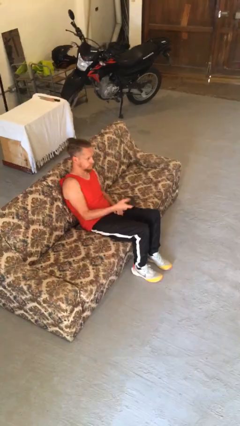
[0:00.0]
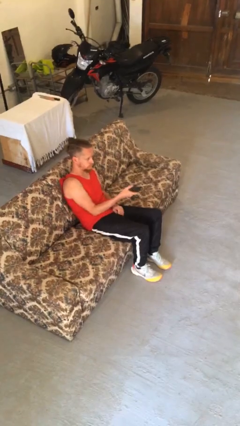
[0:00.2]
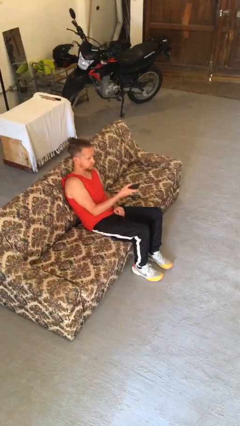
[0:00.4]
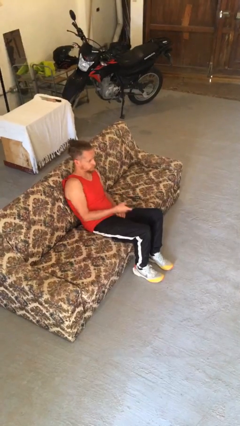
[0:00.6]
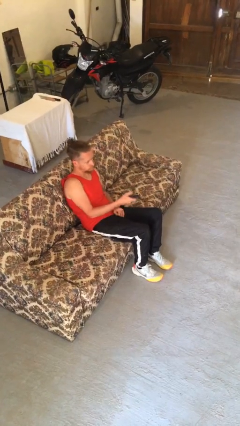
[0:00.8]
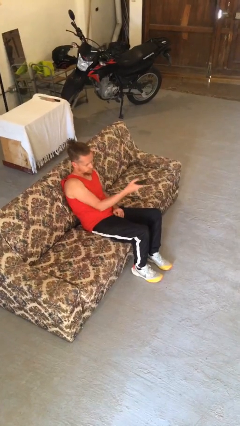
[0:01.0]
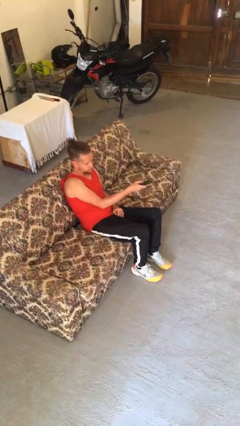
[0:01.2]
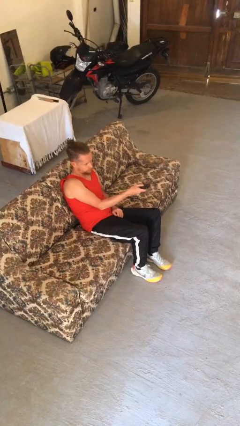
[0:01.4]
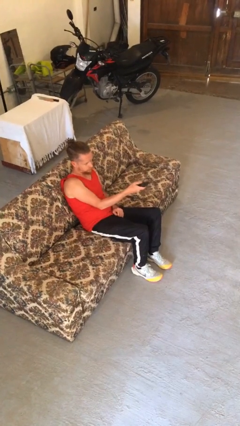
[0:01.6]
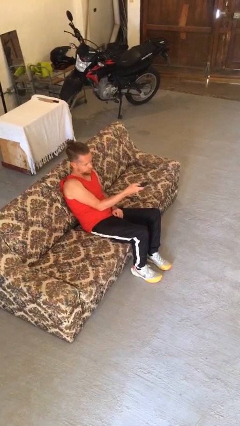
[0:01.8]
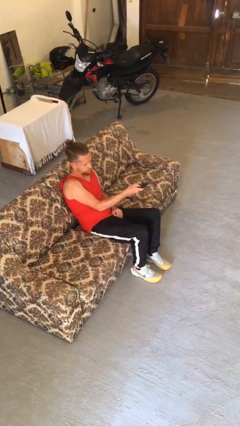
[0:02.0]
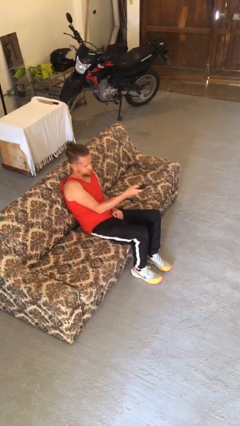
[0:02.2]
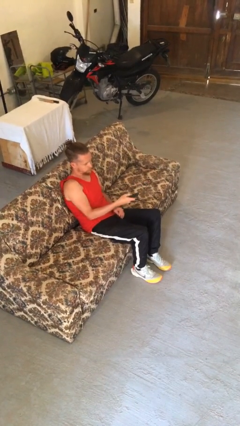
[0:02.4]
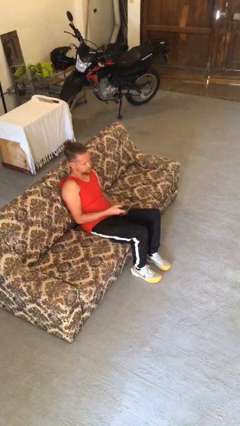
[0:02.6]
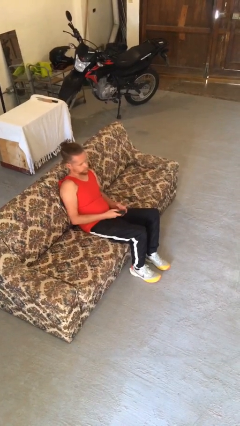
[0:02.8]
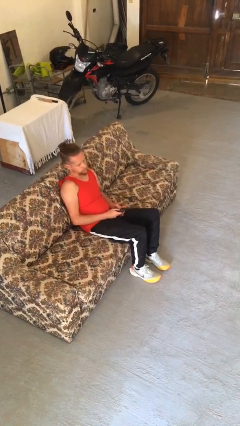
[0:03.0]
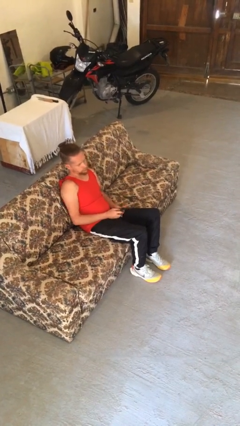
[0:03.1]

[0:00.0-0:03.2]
person uses television remote

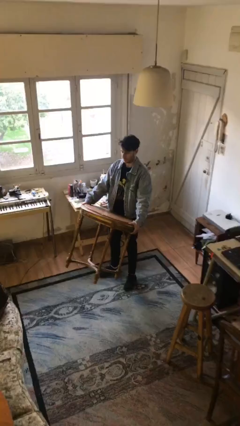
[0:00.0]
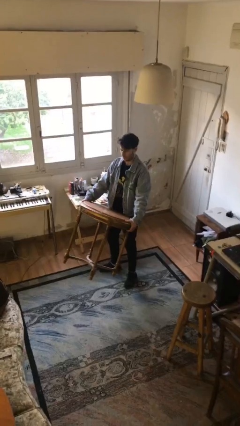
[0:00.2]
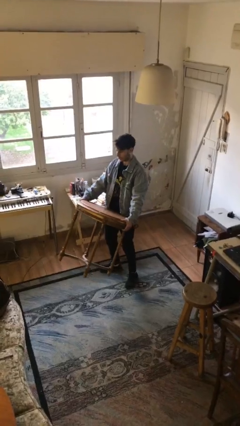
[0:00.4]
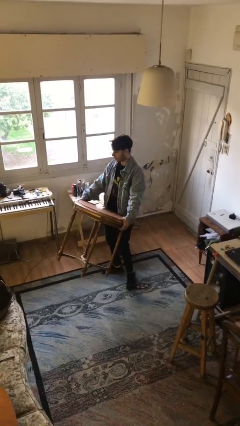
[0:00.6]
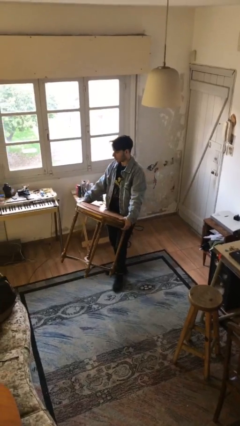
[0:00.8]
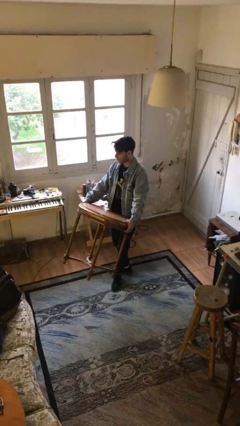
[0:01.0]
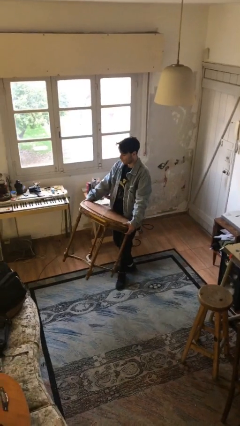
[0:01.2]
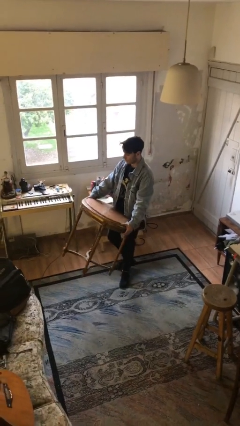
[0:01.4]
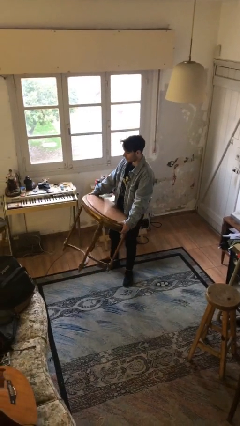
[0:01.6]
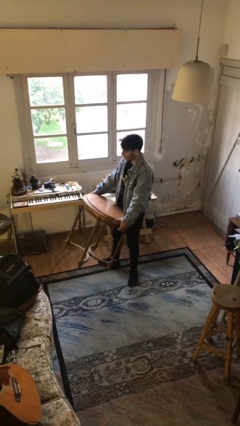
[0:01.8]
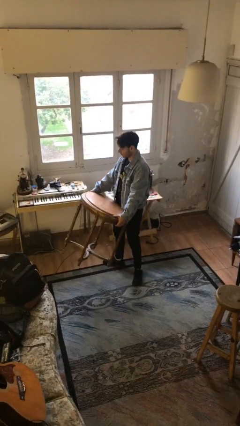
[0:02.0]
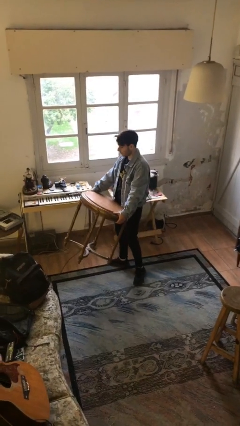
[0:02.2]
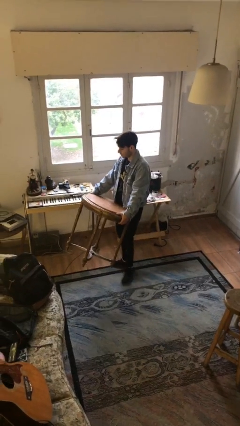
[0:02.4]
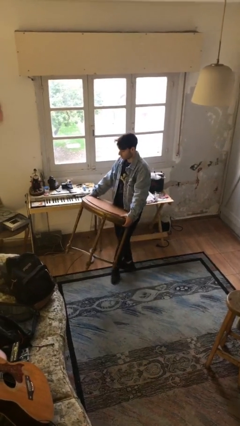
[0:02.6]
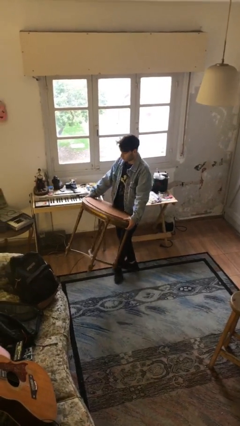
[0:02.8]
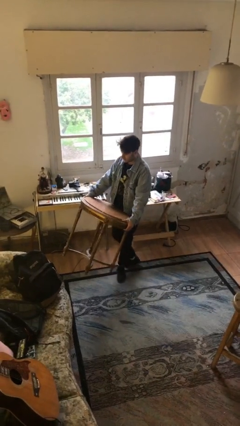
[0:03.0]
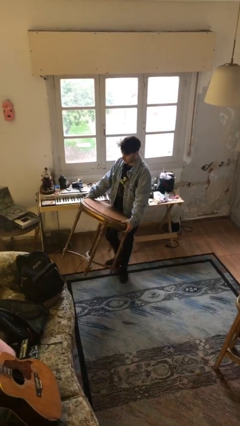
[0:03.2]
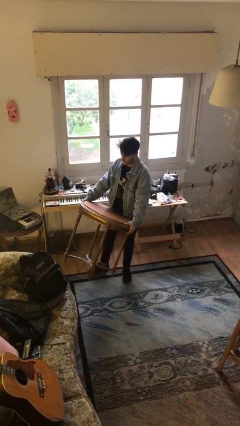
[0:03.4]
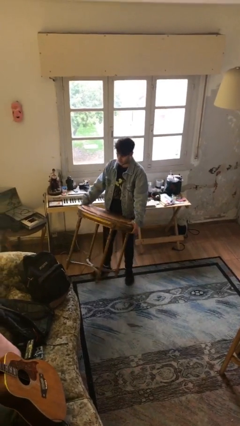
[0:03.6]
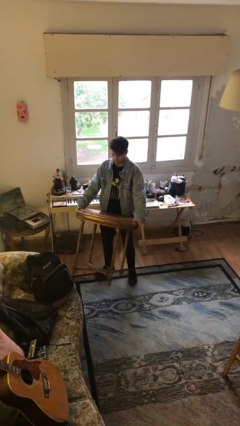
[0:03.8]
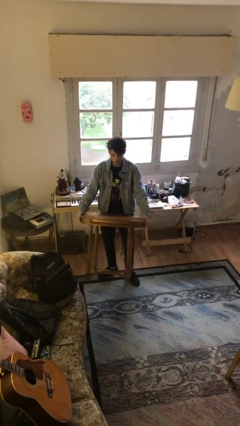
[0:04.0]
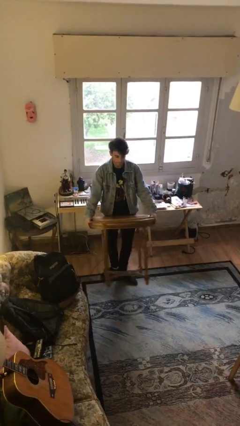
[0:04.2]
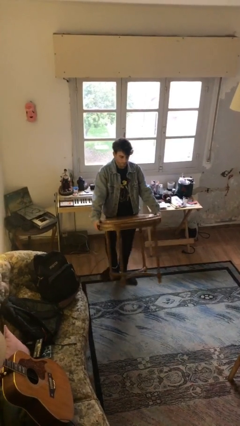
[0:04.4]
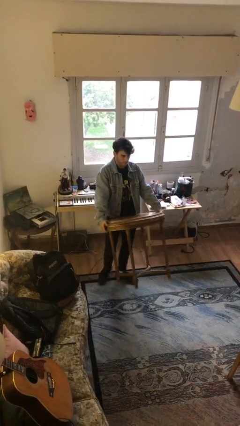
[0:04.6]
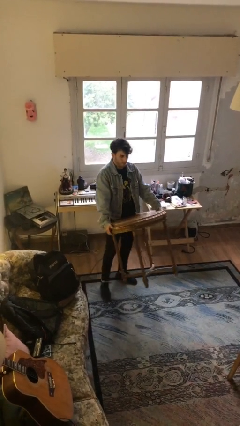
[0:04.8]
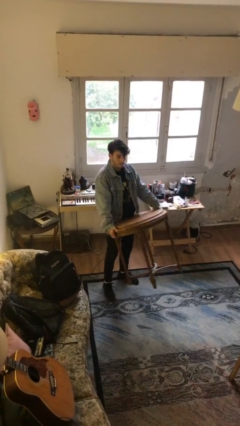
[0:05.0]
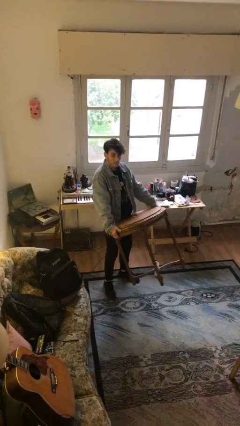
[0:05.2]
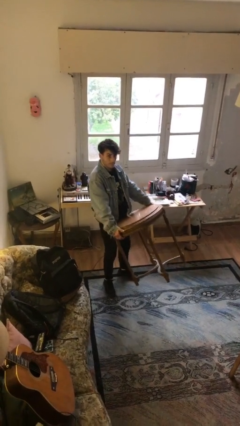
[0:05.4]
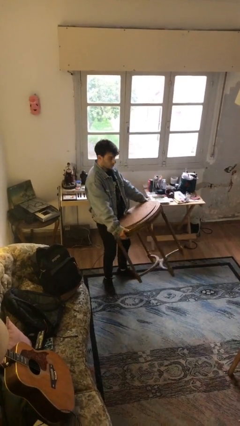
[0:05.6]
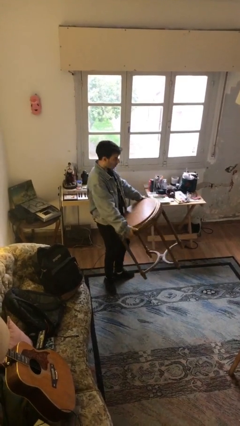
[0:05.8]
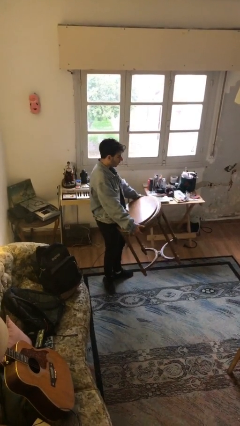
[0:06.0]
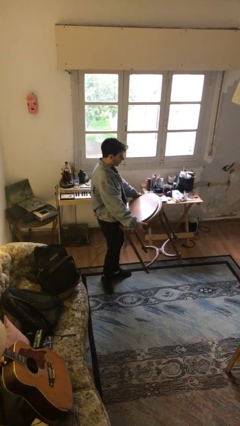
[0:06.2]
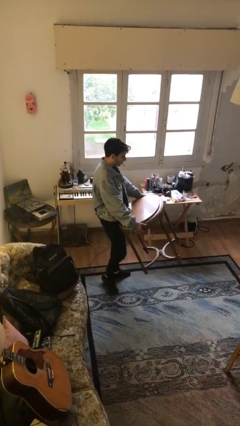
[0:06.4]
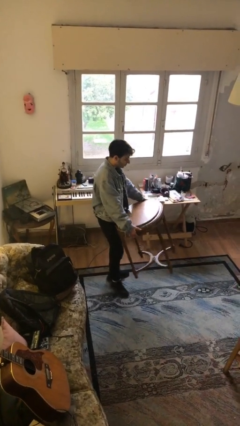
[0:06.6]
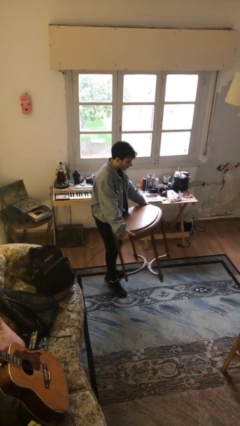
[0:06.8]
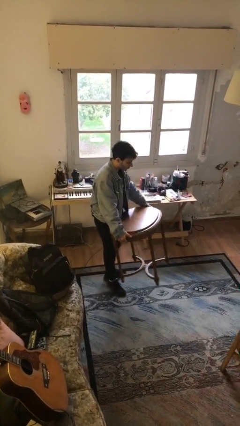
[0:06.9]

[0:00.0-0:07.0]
person carries heavy object

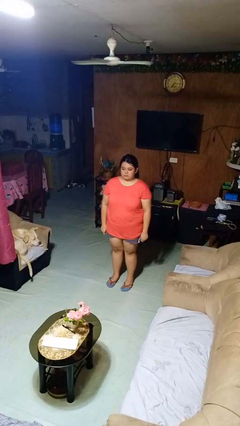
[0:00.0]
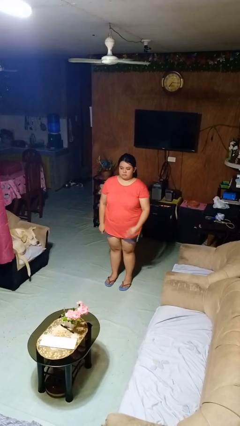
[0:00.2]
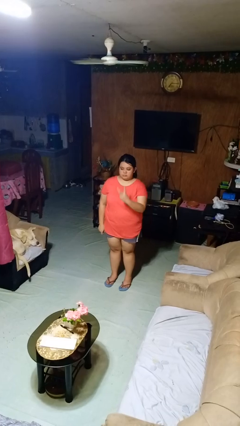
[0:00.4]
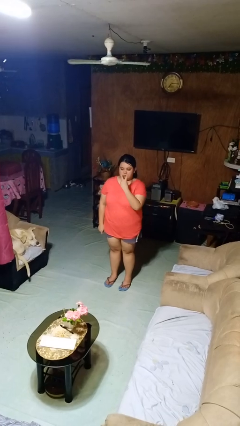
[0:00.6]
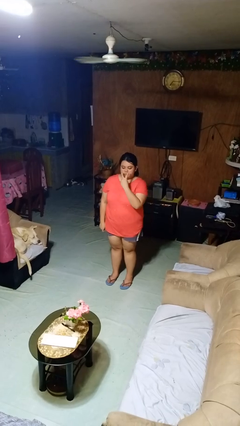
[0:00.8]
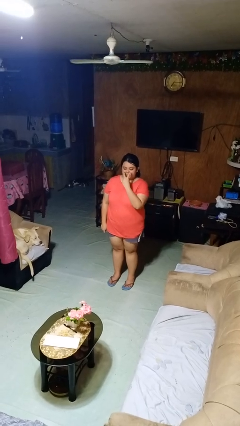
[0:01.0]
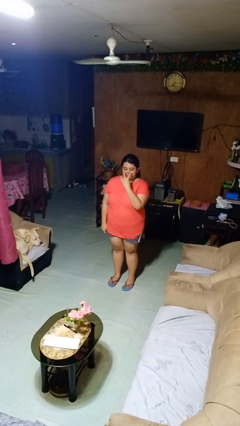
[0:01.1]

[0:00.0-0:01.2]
person gestures watch closely

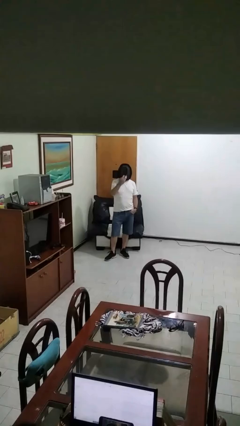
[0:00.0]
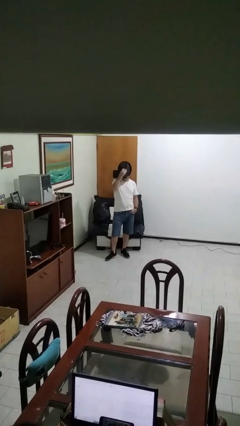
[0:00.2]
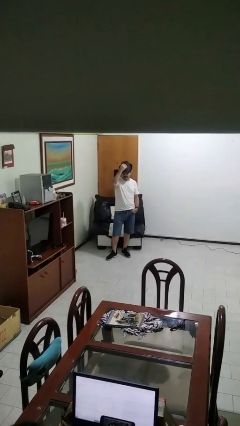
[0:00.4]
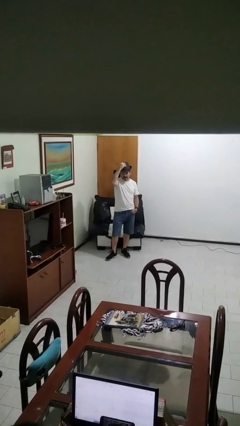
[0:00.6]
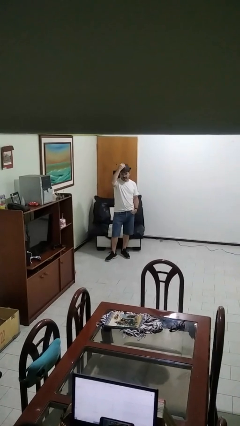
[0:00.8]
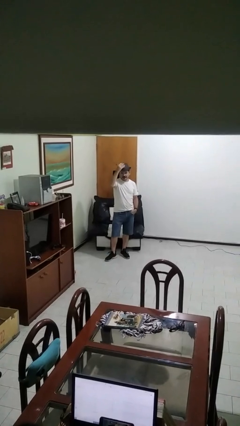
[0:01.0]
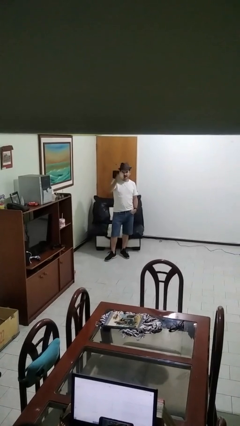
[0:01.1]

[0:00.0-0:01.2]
person puts on hat

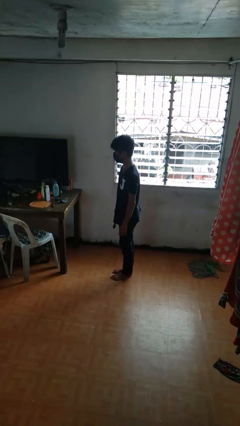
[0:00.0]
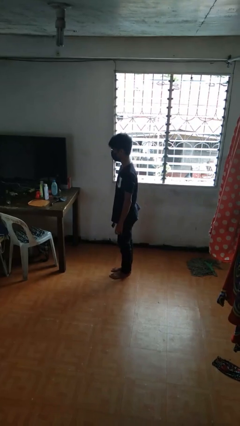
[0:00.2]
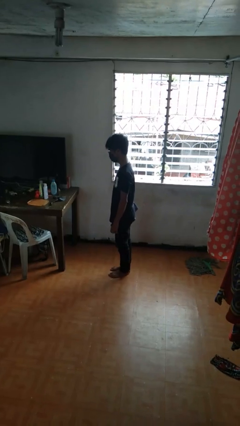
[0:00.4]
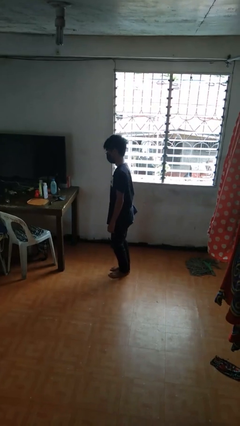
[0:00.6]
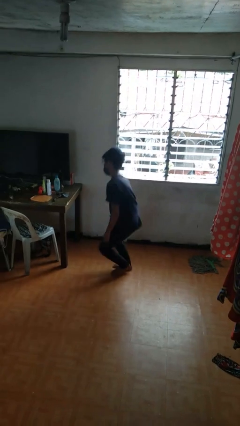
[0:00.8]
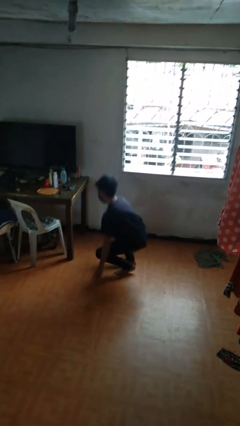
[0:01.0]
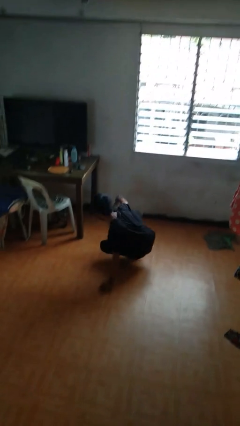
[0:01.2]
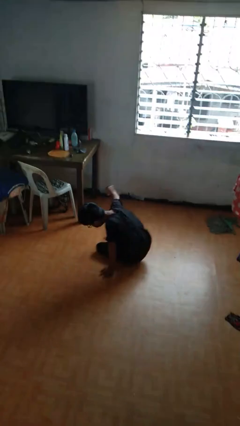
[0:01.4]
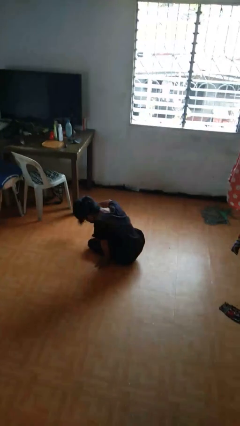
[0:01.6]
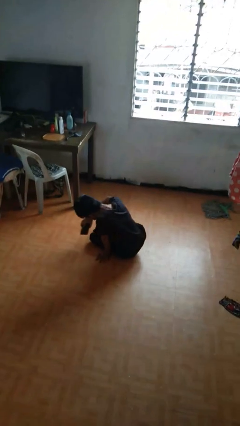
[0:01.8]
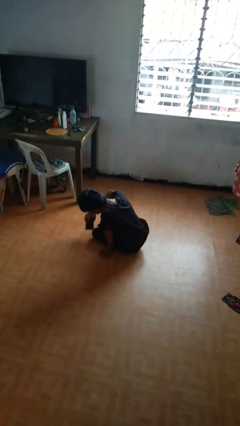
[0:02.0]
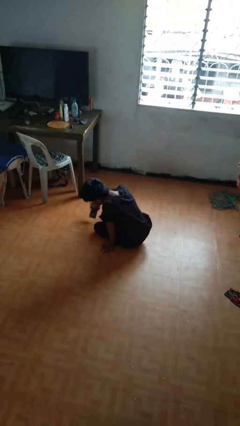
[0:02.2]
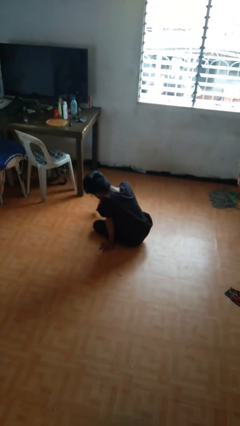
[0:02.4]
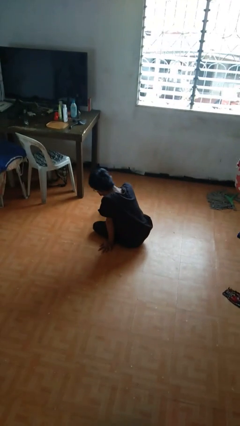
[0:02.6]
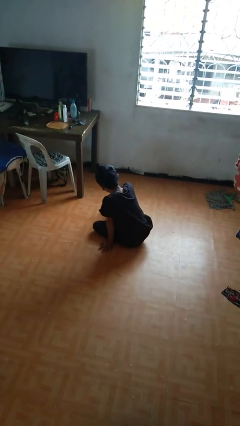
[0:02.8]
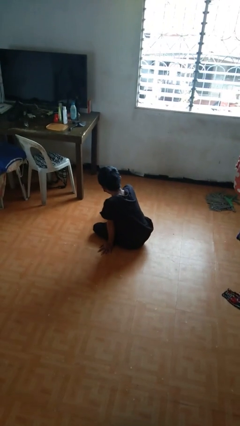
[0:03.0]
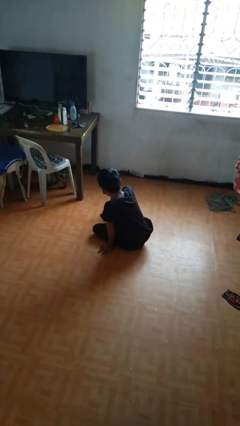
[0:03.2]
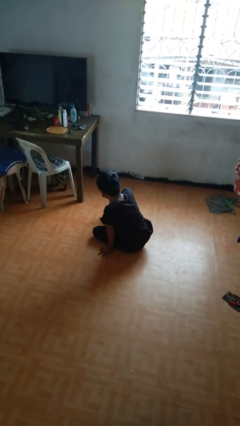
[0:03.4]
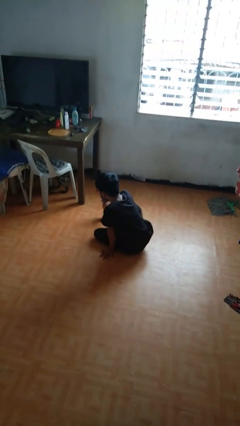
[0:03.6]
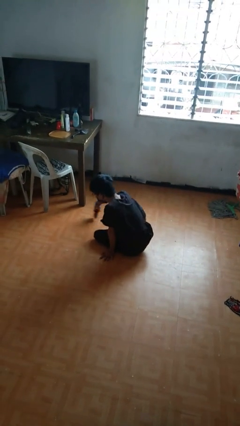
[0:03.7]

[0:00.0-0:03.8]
person falls while standing

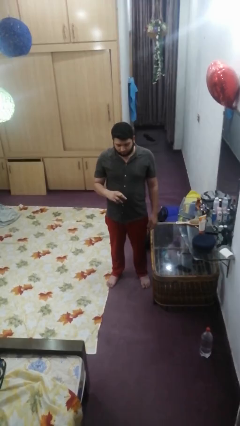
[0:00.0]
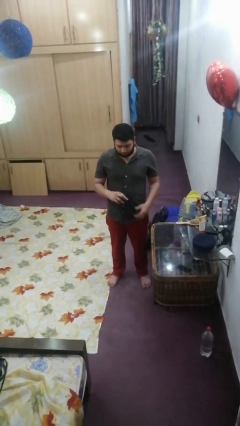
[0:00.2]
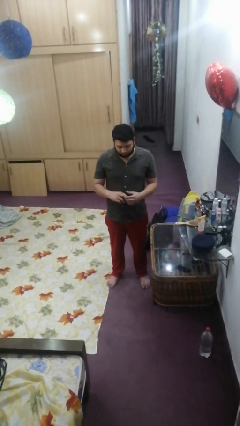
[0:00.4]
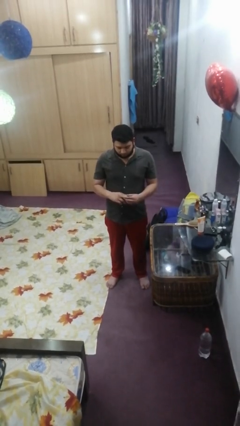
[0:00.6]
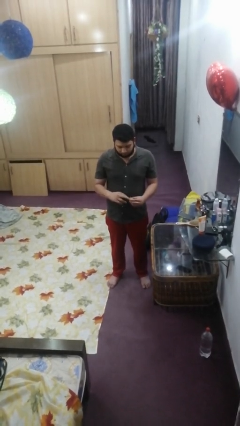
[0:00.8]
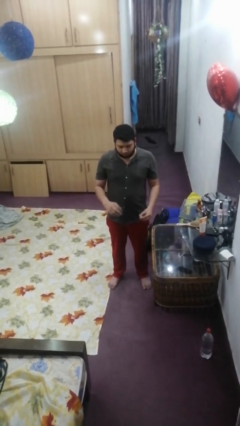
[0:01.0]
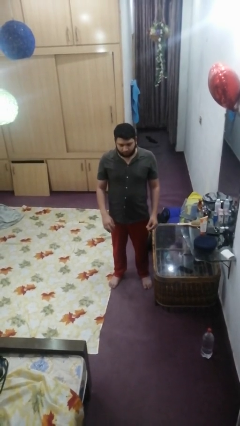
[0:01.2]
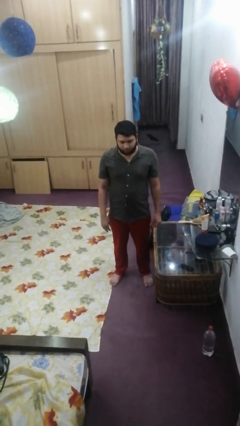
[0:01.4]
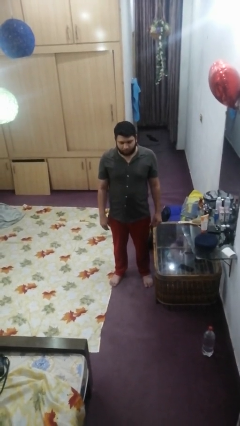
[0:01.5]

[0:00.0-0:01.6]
person takes off ring
